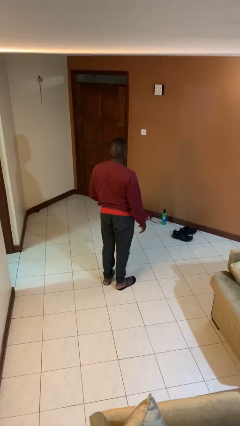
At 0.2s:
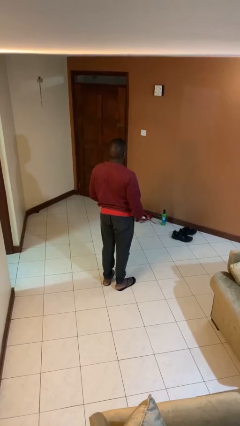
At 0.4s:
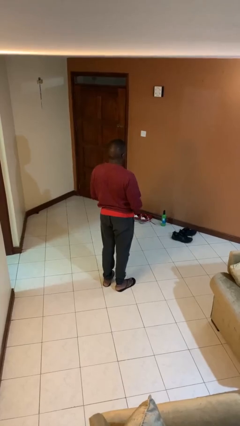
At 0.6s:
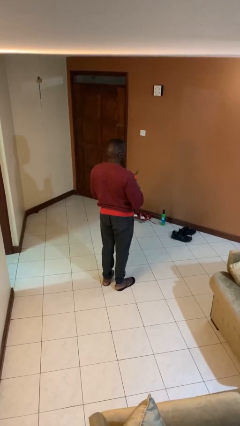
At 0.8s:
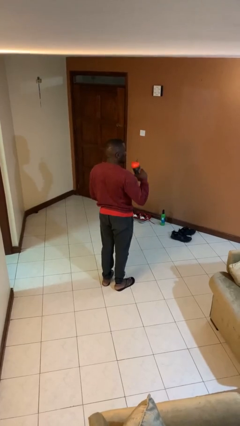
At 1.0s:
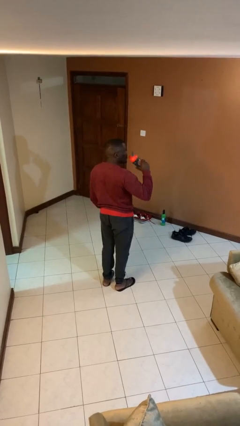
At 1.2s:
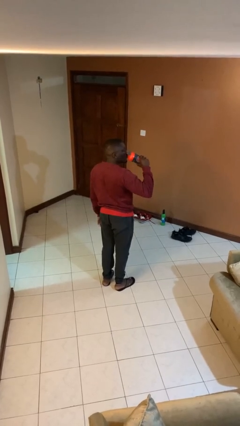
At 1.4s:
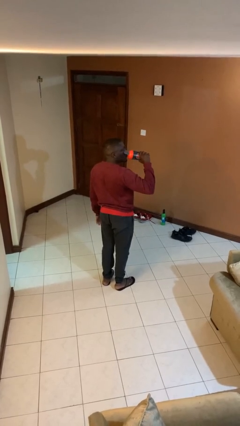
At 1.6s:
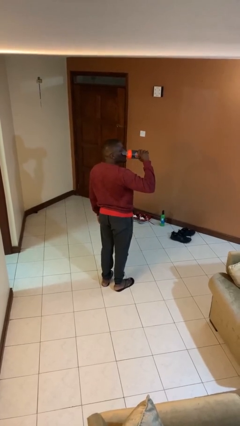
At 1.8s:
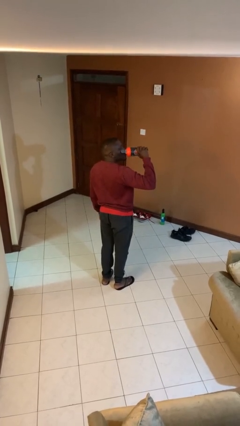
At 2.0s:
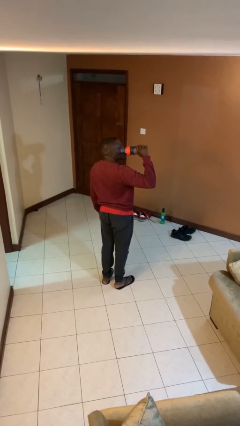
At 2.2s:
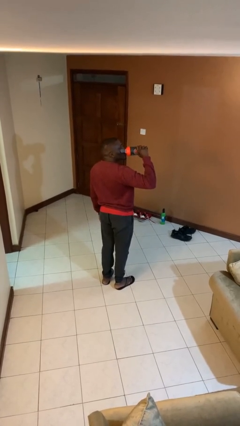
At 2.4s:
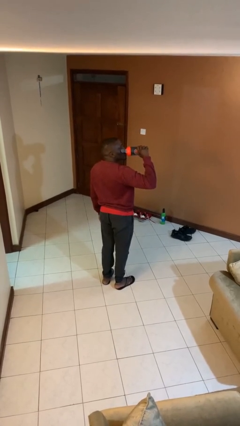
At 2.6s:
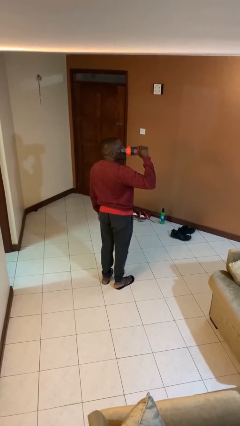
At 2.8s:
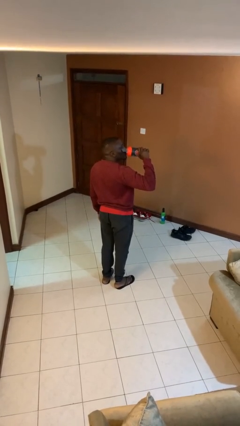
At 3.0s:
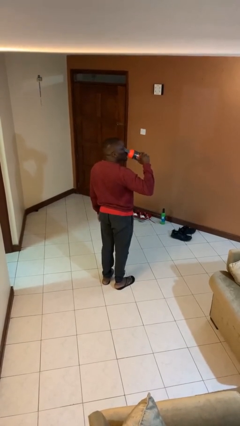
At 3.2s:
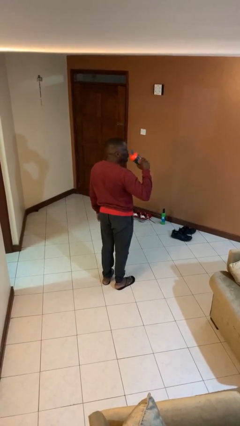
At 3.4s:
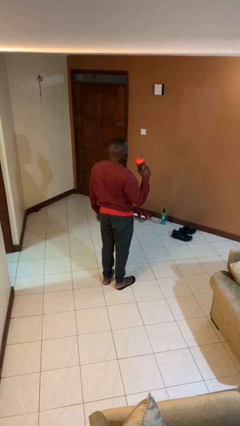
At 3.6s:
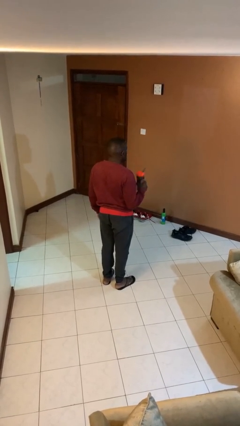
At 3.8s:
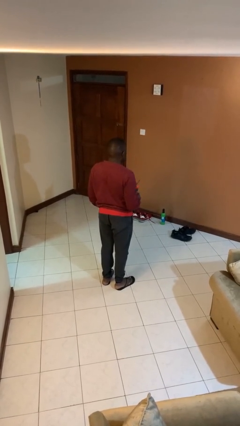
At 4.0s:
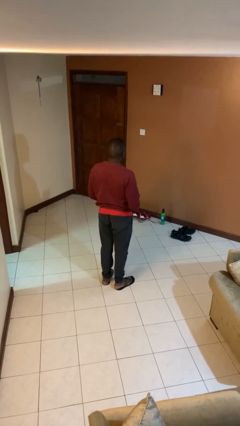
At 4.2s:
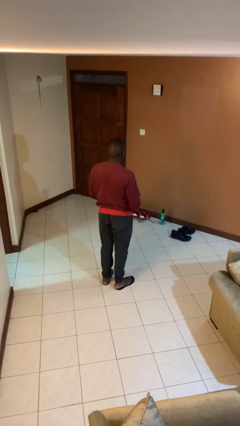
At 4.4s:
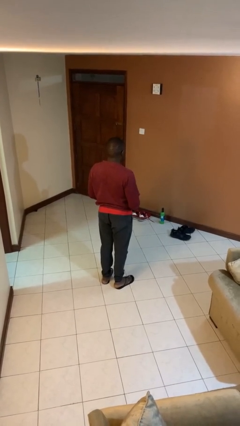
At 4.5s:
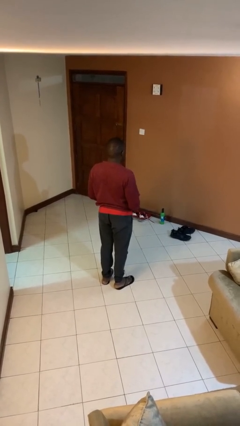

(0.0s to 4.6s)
person drinks from bottle

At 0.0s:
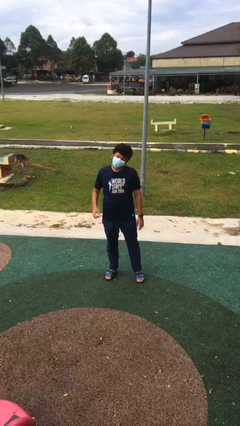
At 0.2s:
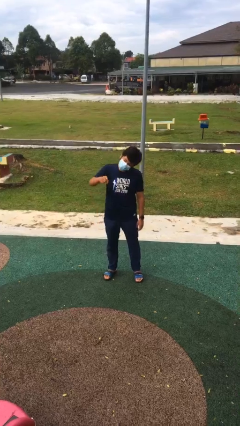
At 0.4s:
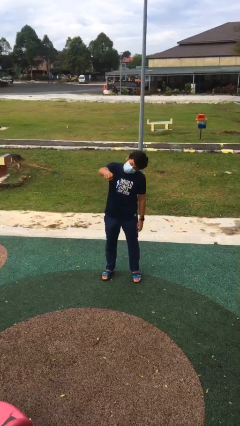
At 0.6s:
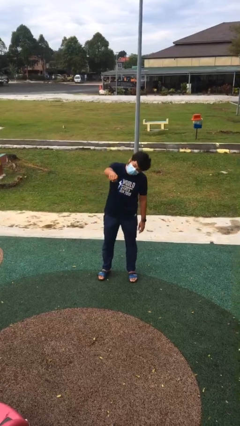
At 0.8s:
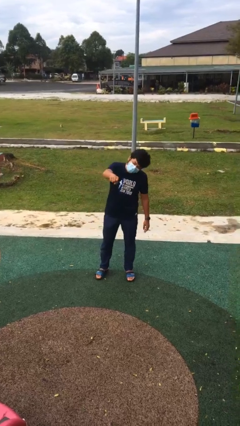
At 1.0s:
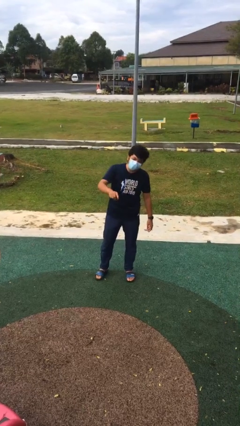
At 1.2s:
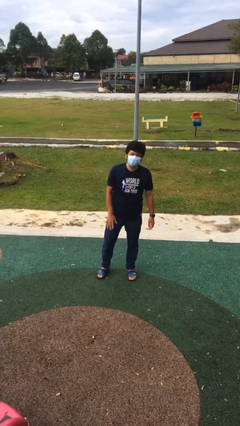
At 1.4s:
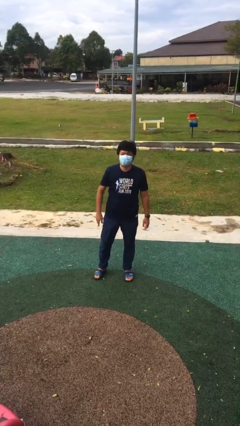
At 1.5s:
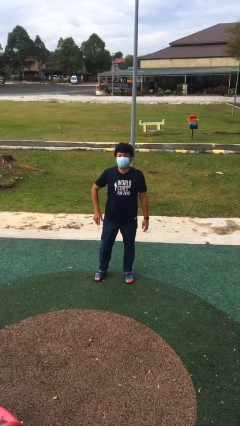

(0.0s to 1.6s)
person points at person

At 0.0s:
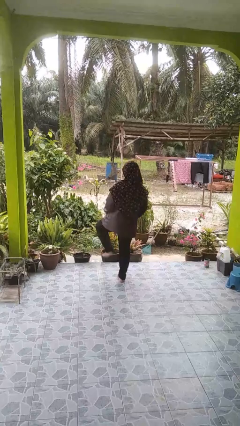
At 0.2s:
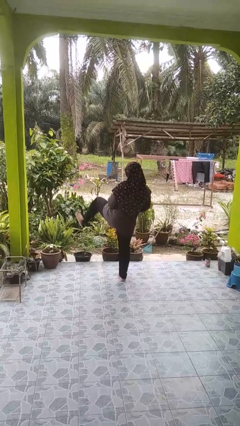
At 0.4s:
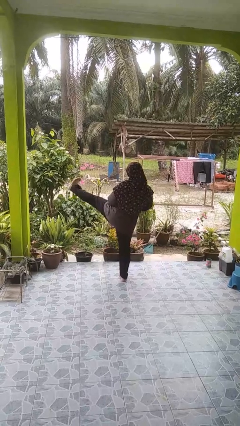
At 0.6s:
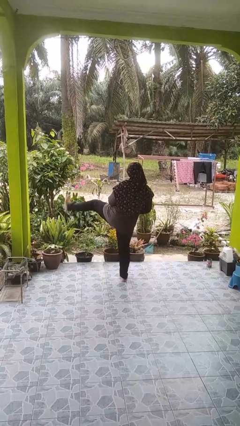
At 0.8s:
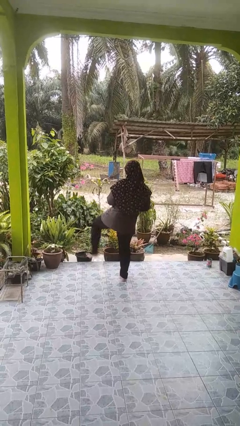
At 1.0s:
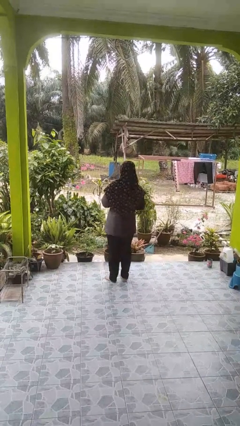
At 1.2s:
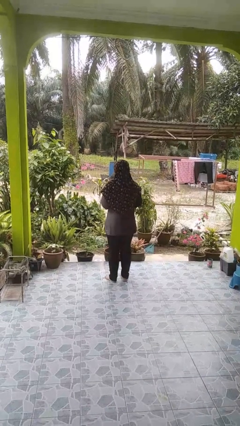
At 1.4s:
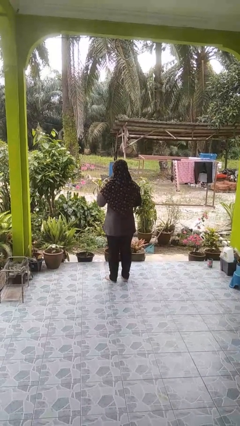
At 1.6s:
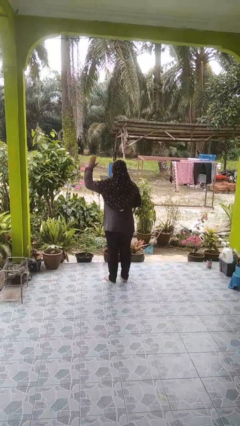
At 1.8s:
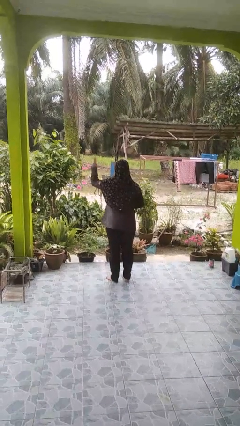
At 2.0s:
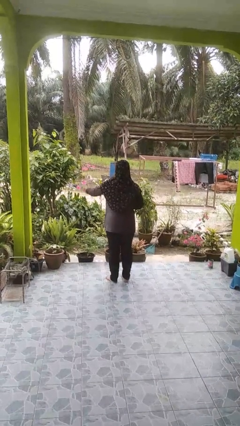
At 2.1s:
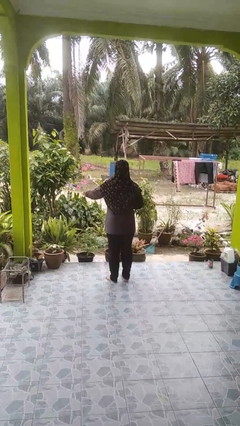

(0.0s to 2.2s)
person karate kicks

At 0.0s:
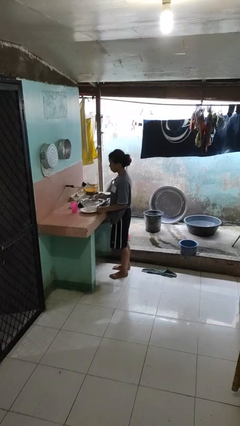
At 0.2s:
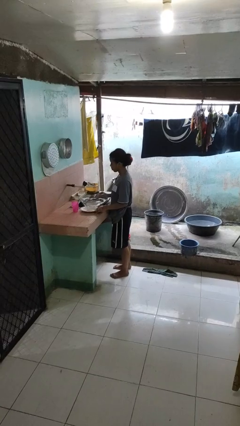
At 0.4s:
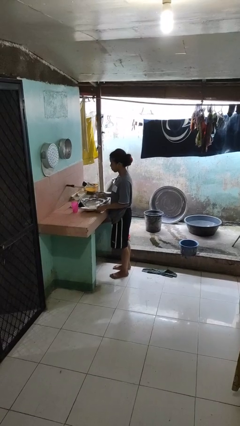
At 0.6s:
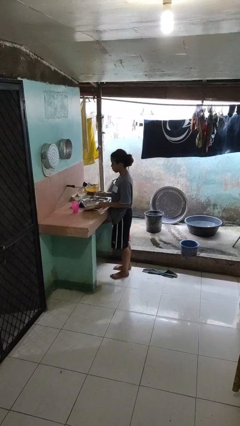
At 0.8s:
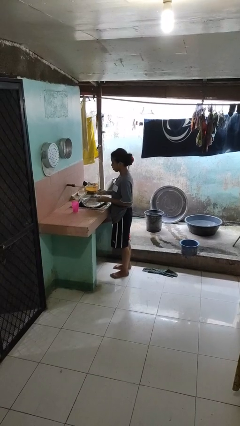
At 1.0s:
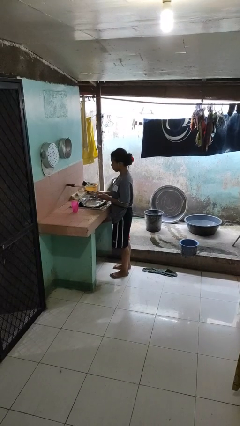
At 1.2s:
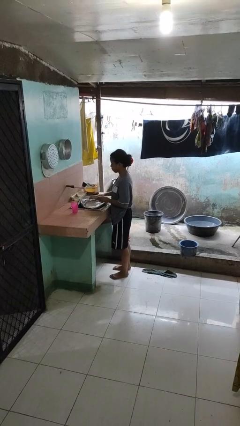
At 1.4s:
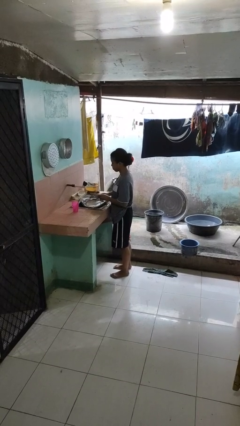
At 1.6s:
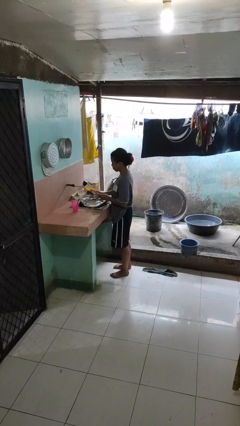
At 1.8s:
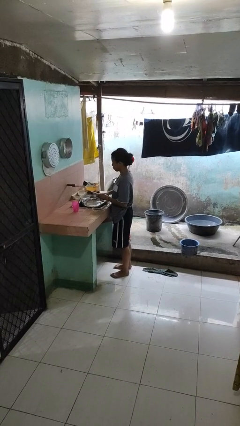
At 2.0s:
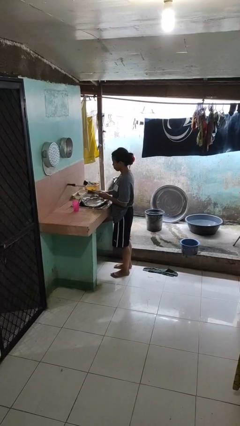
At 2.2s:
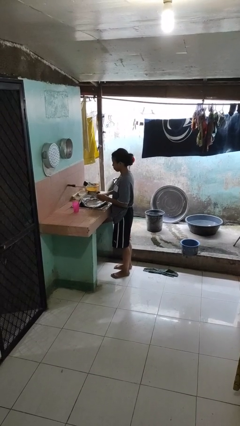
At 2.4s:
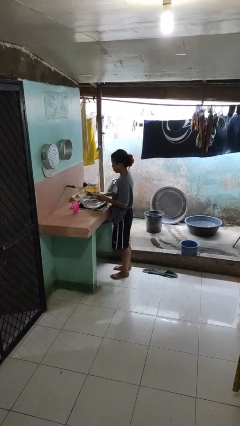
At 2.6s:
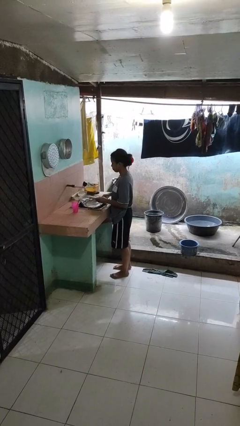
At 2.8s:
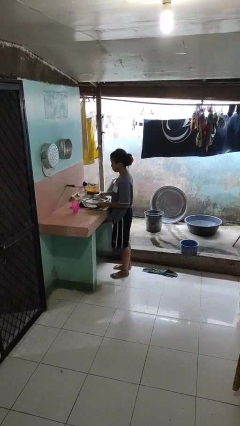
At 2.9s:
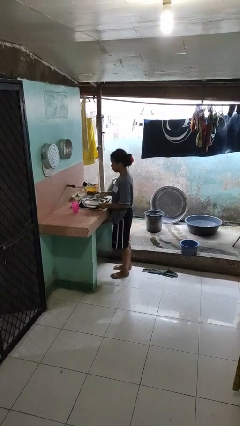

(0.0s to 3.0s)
person washes dish

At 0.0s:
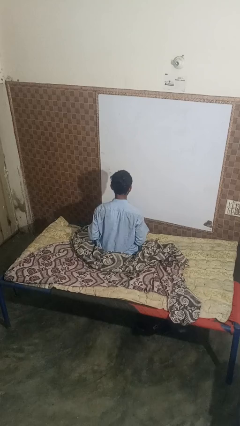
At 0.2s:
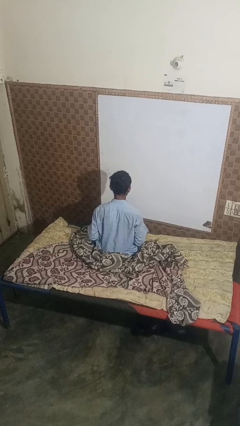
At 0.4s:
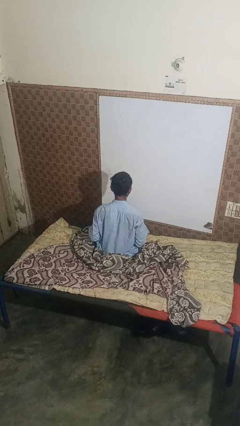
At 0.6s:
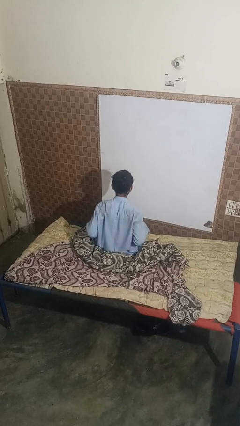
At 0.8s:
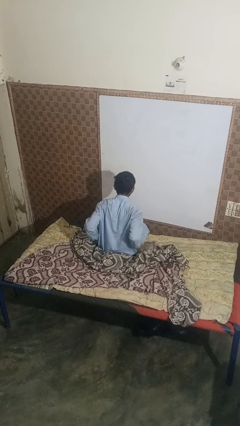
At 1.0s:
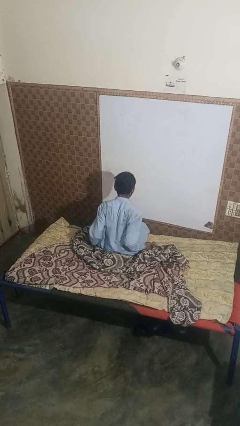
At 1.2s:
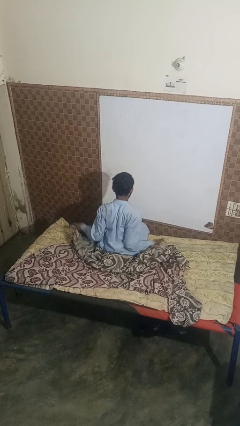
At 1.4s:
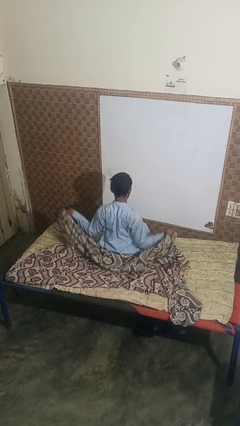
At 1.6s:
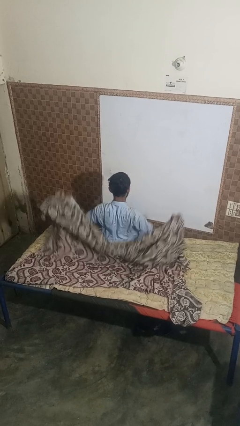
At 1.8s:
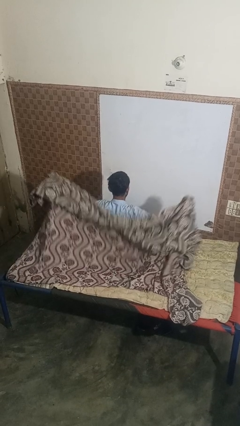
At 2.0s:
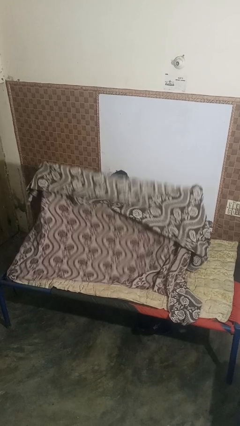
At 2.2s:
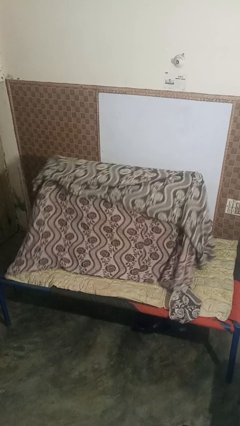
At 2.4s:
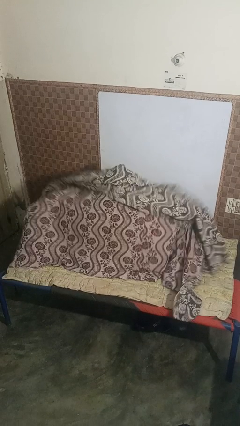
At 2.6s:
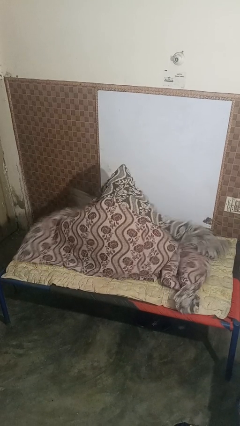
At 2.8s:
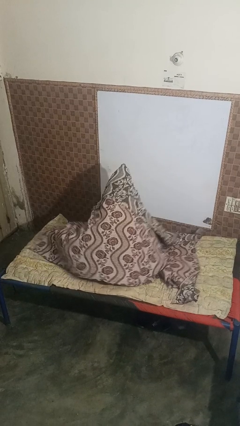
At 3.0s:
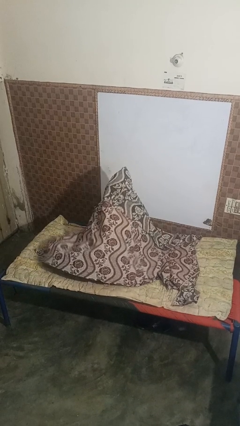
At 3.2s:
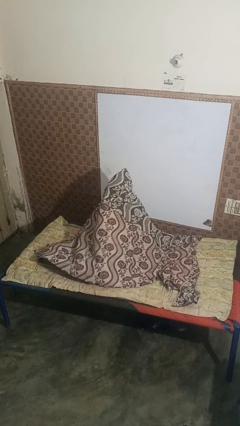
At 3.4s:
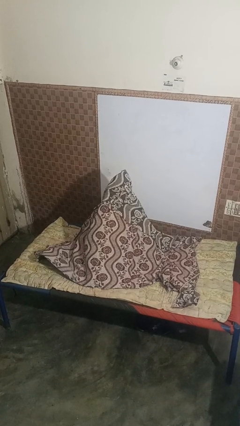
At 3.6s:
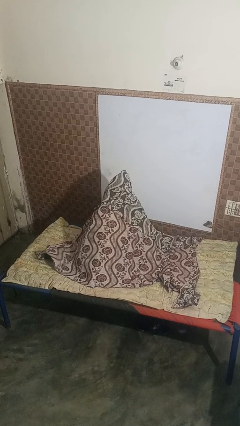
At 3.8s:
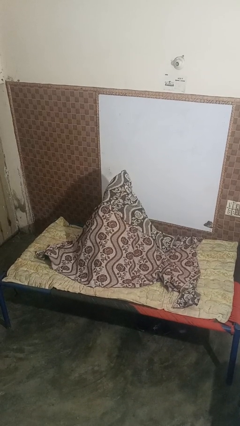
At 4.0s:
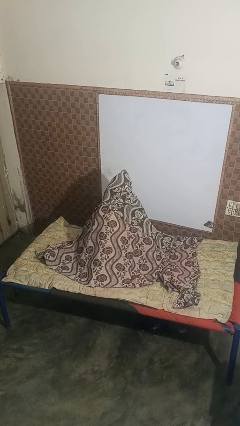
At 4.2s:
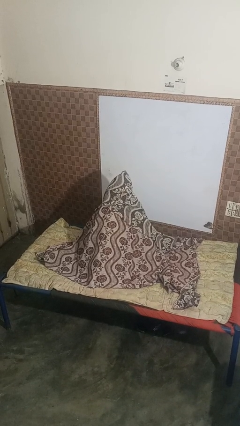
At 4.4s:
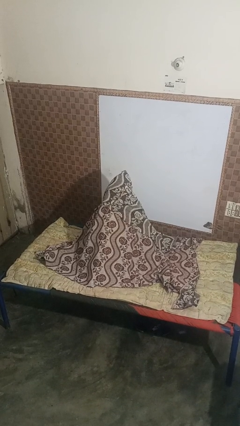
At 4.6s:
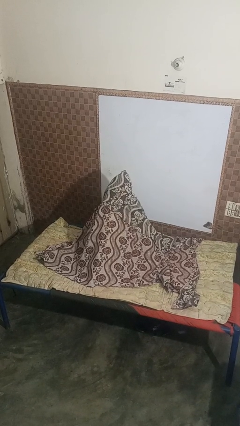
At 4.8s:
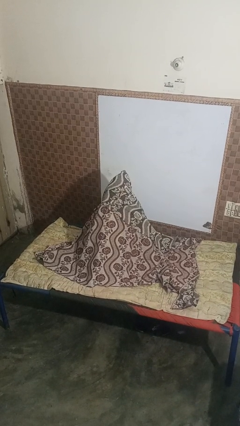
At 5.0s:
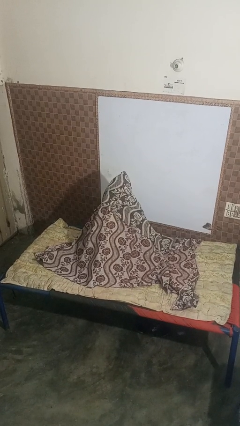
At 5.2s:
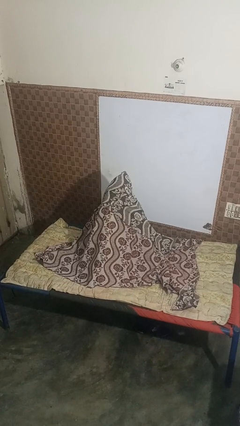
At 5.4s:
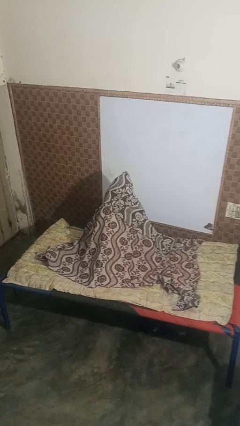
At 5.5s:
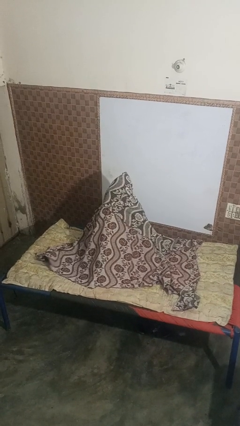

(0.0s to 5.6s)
person covers with blanket

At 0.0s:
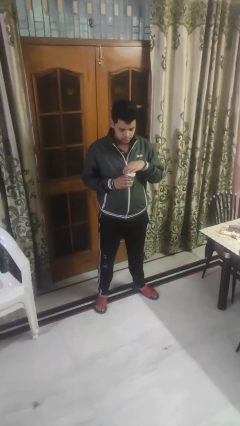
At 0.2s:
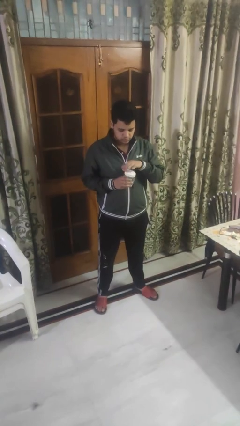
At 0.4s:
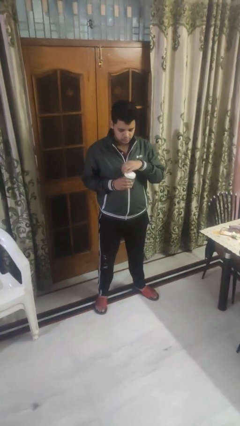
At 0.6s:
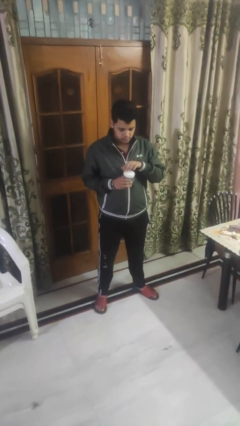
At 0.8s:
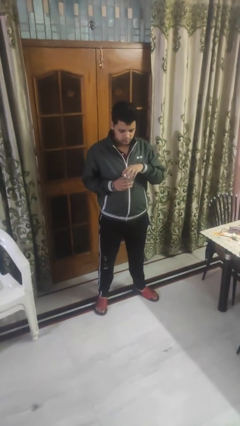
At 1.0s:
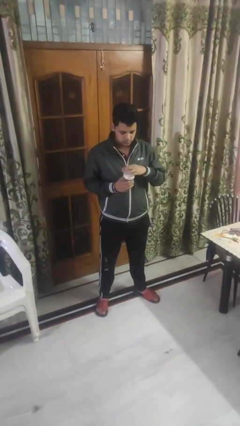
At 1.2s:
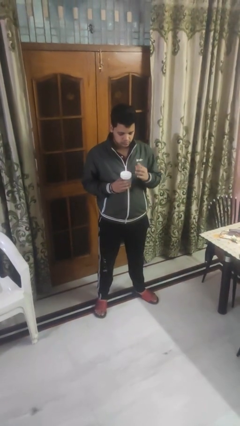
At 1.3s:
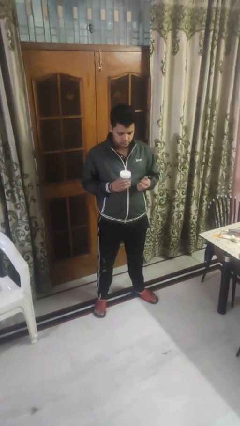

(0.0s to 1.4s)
person closes jar
